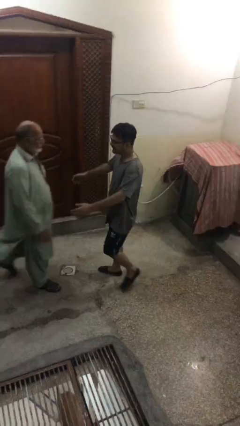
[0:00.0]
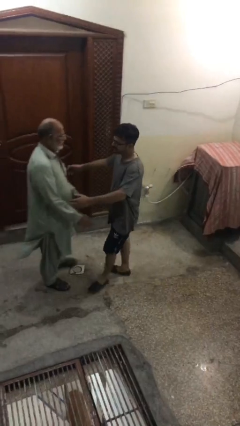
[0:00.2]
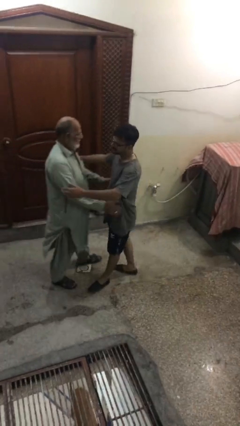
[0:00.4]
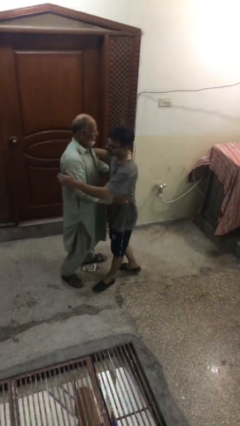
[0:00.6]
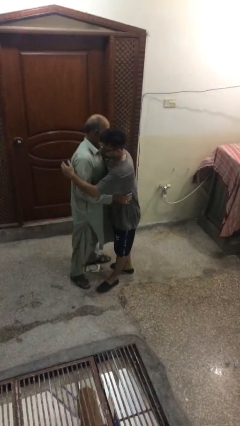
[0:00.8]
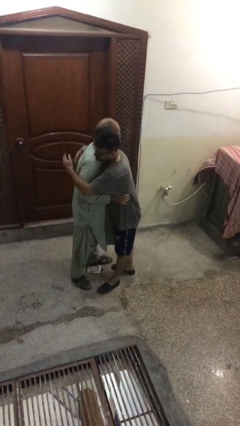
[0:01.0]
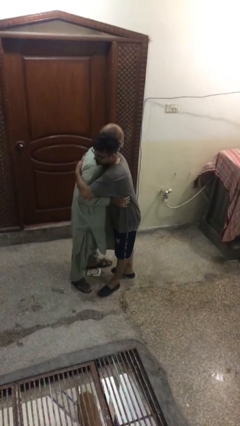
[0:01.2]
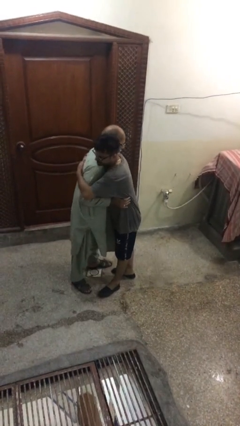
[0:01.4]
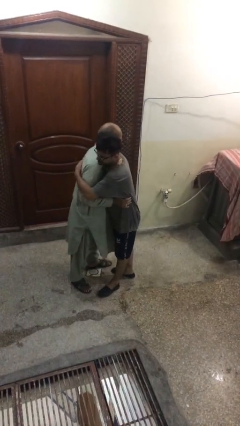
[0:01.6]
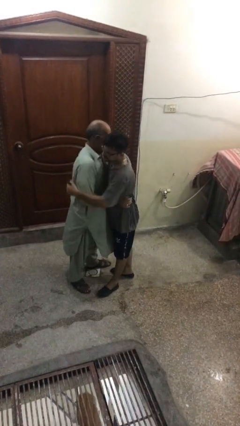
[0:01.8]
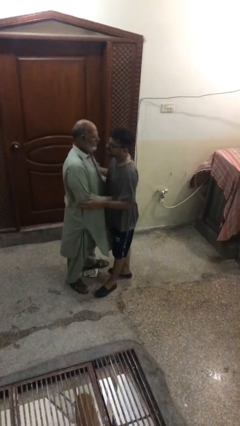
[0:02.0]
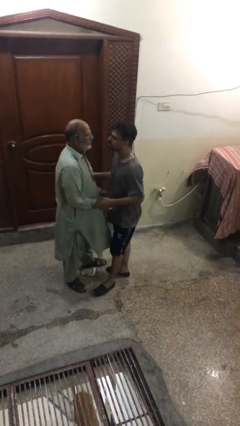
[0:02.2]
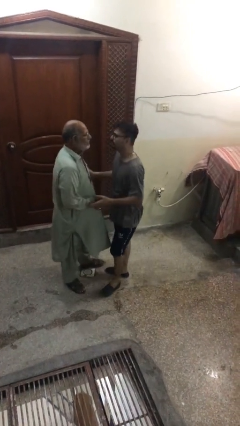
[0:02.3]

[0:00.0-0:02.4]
person embraces person

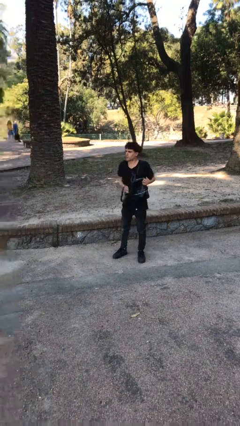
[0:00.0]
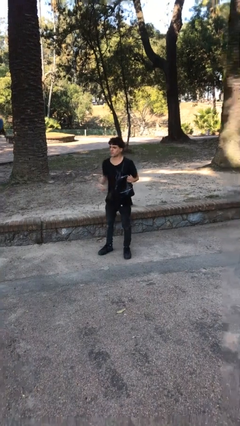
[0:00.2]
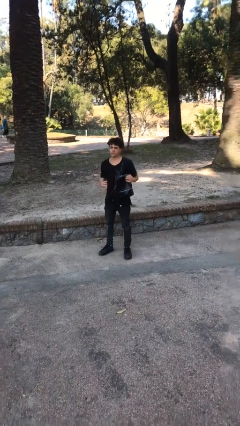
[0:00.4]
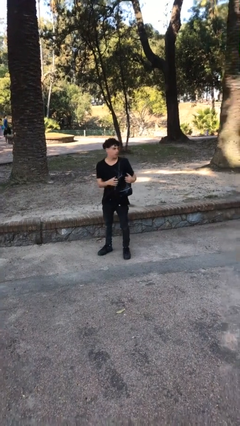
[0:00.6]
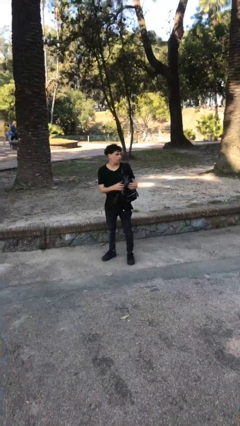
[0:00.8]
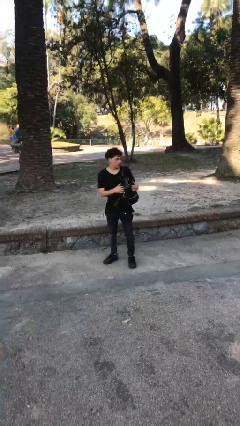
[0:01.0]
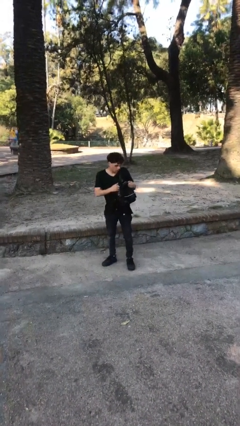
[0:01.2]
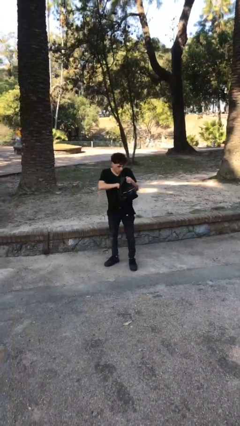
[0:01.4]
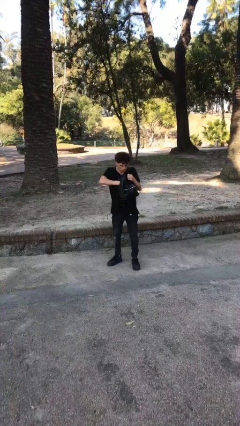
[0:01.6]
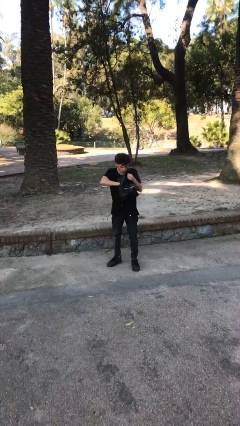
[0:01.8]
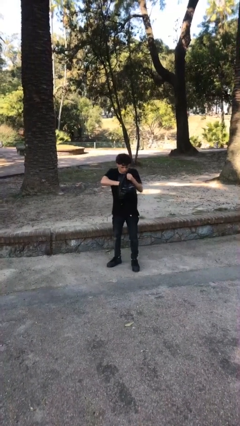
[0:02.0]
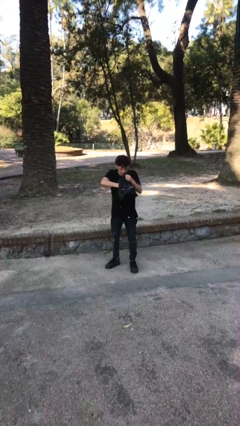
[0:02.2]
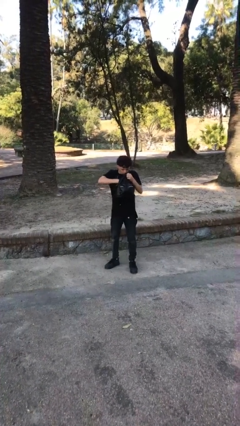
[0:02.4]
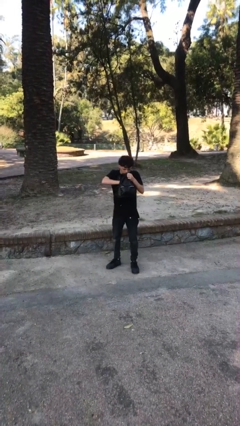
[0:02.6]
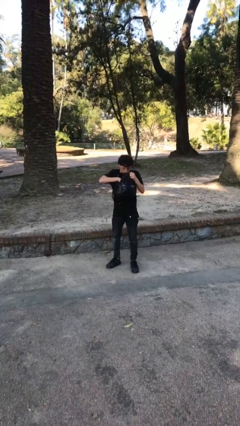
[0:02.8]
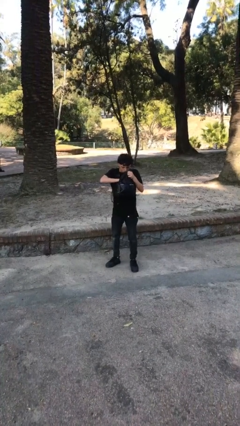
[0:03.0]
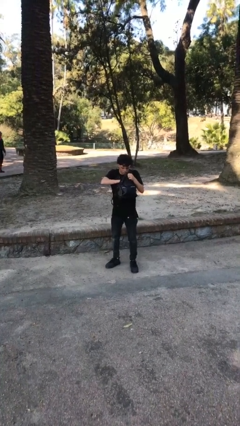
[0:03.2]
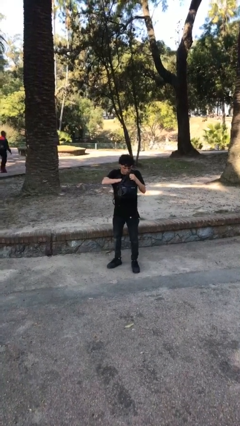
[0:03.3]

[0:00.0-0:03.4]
person searches in purse

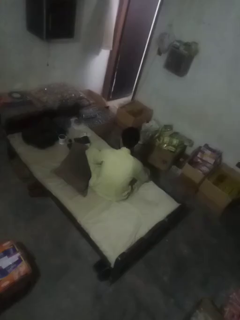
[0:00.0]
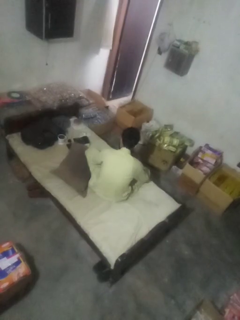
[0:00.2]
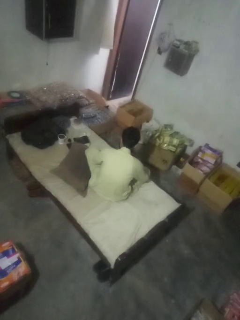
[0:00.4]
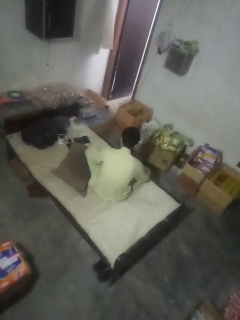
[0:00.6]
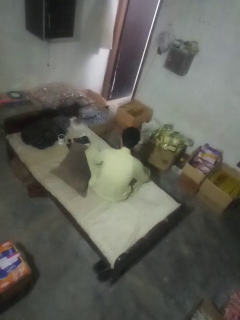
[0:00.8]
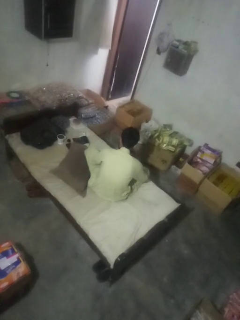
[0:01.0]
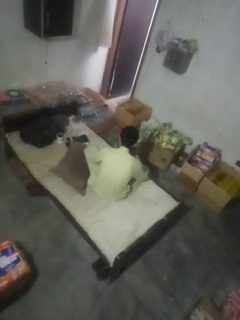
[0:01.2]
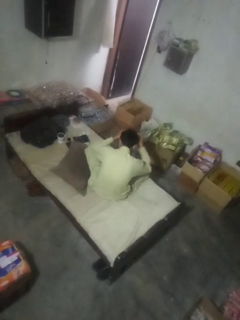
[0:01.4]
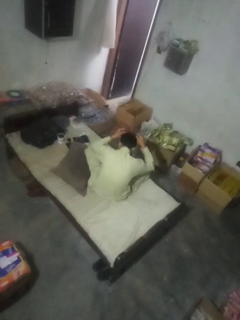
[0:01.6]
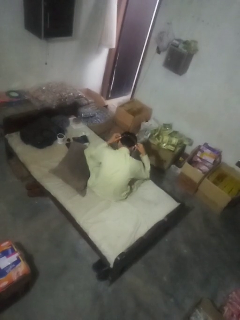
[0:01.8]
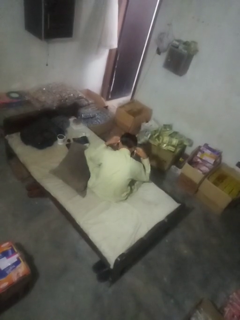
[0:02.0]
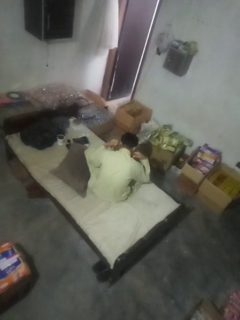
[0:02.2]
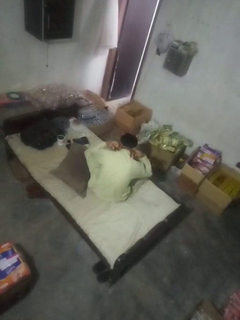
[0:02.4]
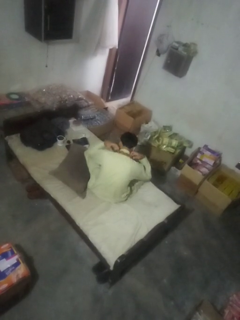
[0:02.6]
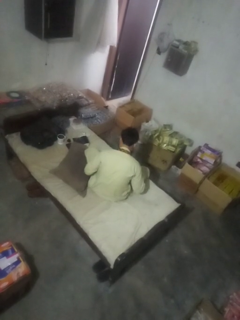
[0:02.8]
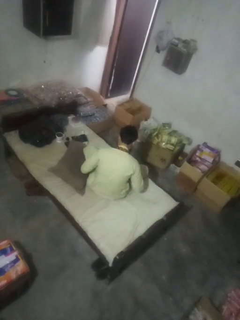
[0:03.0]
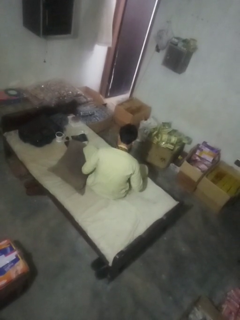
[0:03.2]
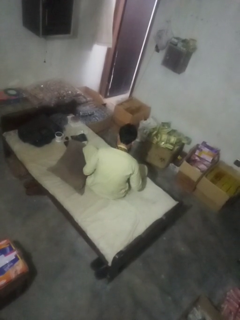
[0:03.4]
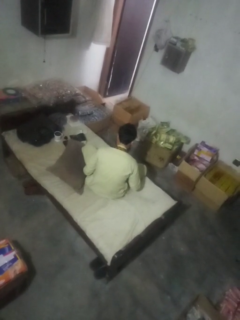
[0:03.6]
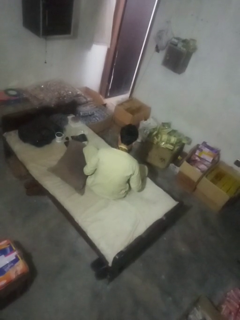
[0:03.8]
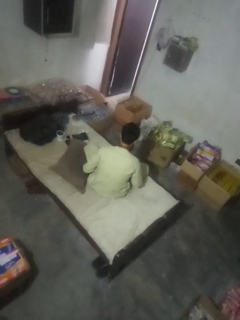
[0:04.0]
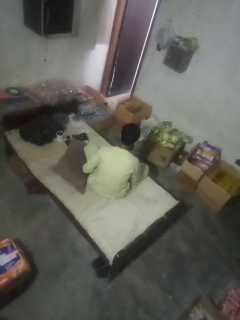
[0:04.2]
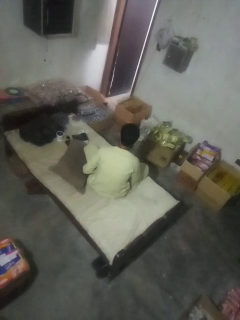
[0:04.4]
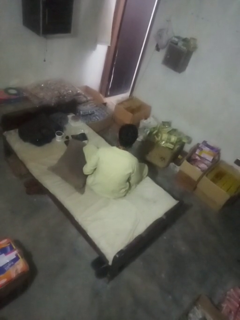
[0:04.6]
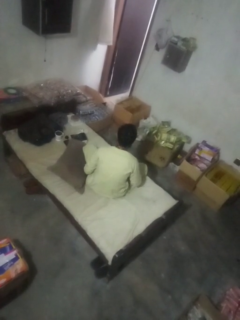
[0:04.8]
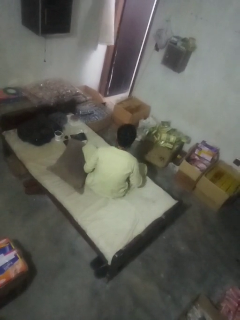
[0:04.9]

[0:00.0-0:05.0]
person puts on necktie

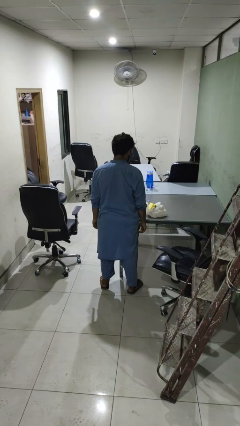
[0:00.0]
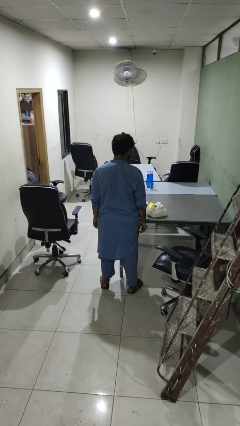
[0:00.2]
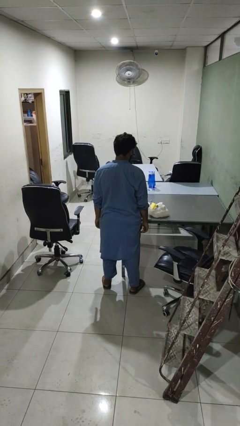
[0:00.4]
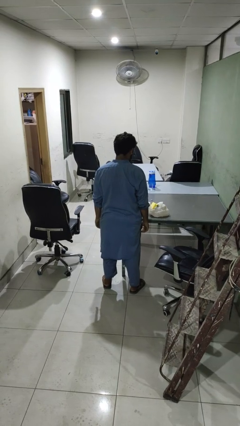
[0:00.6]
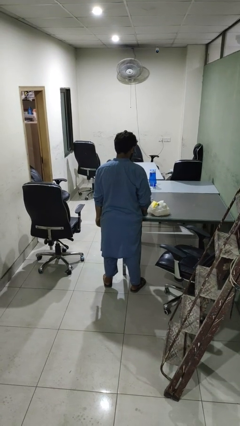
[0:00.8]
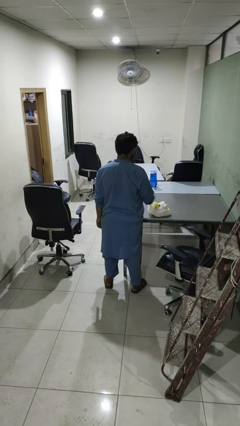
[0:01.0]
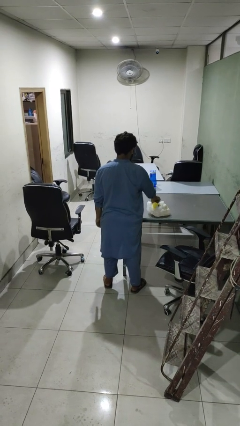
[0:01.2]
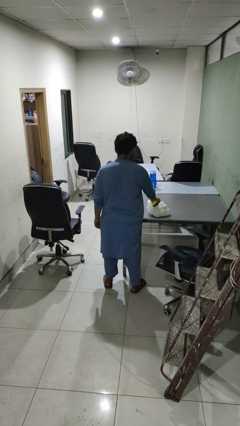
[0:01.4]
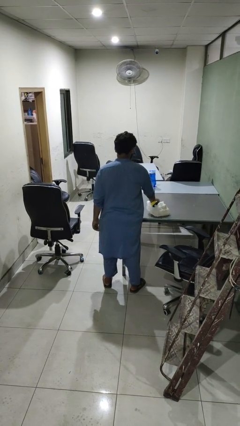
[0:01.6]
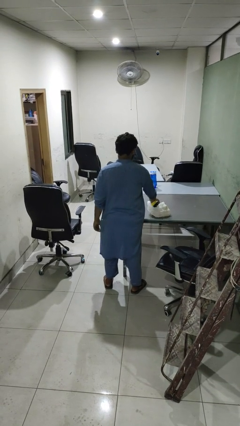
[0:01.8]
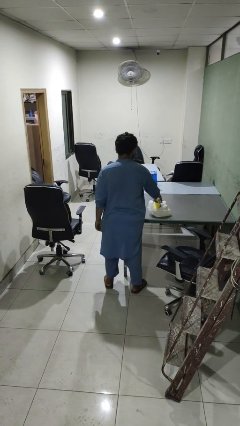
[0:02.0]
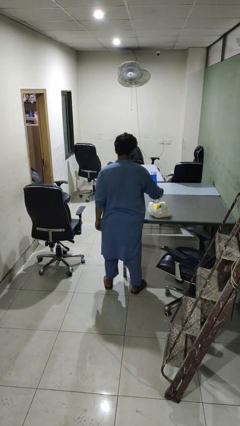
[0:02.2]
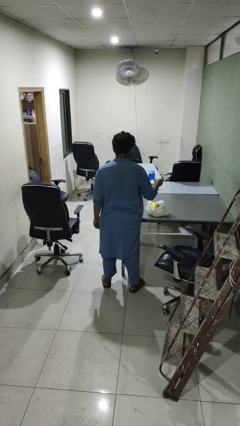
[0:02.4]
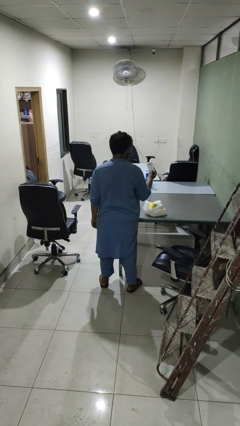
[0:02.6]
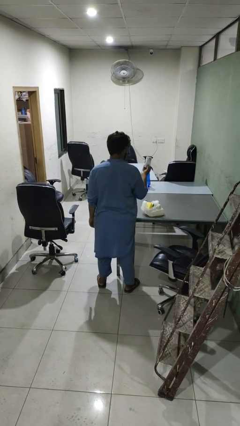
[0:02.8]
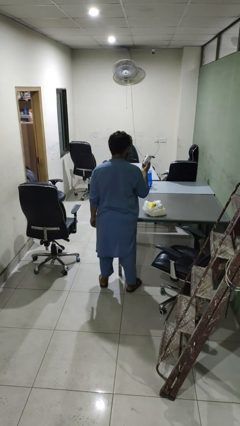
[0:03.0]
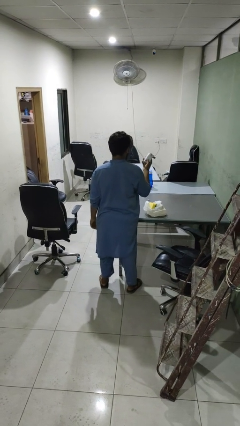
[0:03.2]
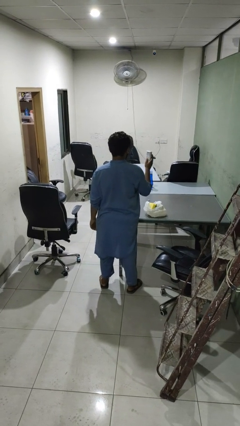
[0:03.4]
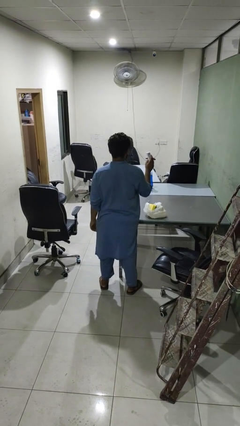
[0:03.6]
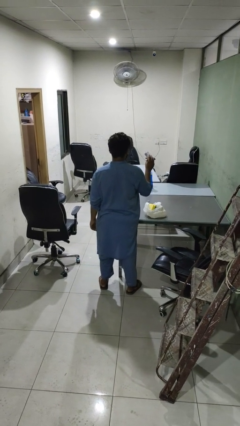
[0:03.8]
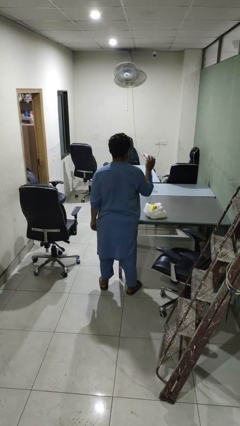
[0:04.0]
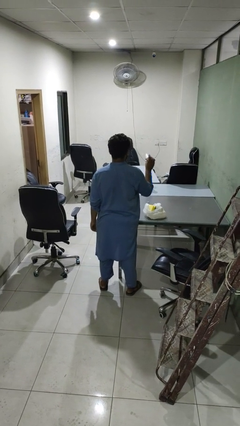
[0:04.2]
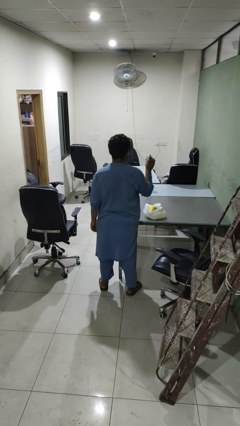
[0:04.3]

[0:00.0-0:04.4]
person takes object from bag

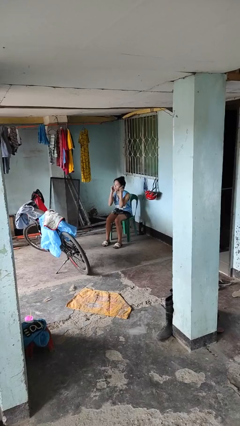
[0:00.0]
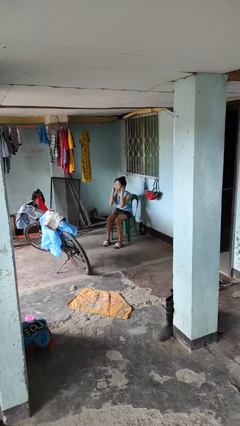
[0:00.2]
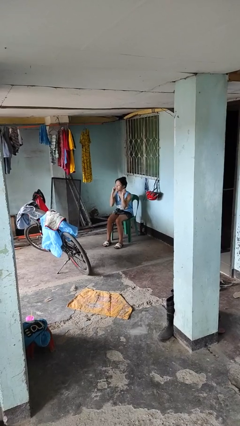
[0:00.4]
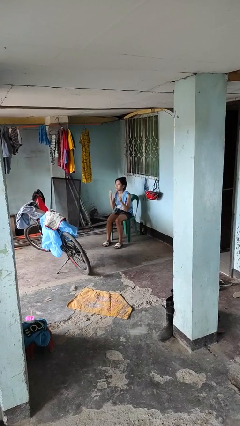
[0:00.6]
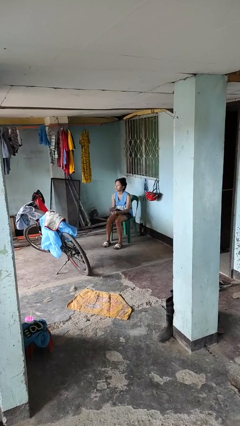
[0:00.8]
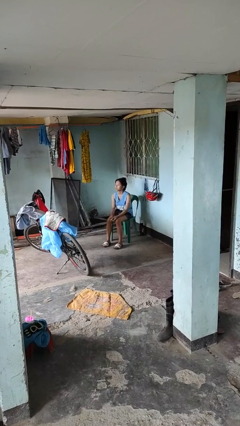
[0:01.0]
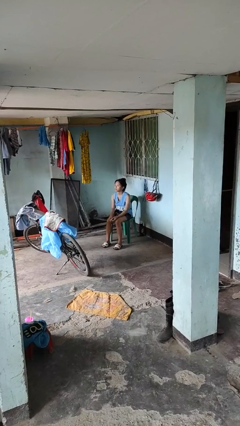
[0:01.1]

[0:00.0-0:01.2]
person takes off headphones

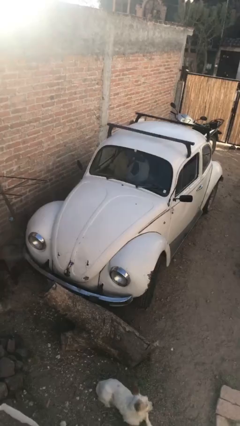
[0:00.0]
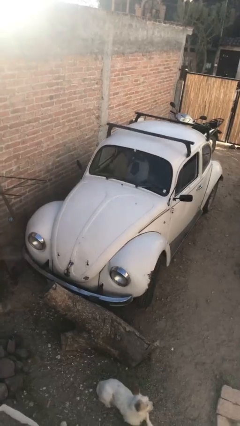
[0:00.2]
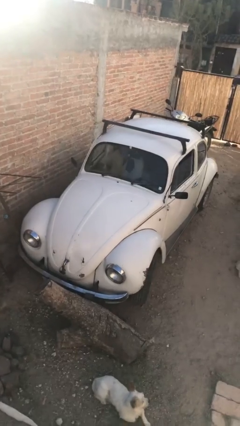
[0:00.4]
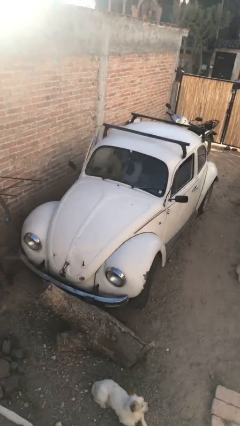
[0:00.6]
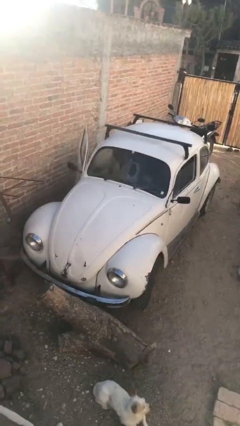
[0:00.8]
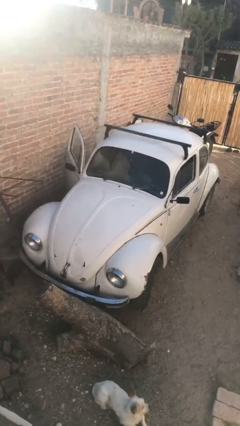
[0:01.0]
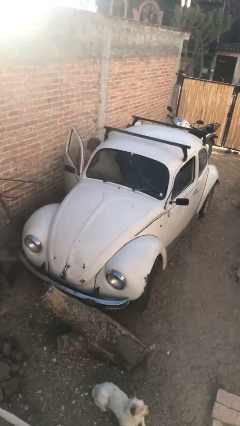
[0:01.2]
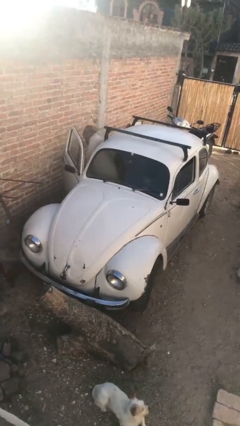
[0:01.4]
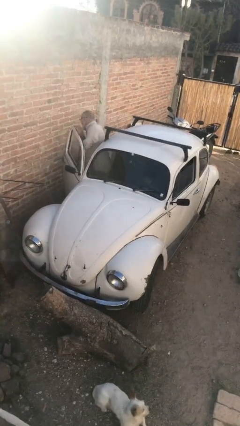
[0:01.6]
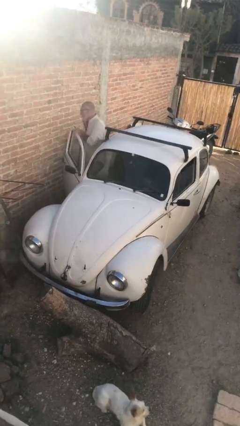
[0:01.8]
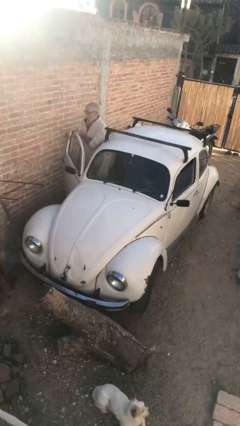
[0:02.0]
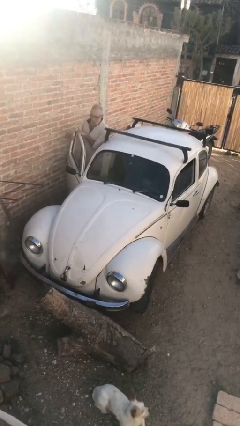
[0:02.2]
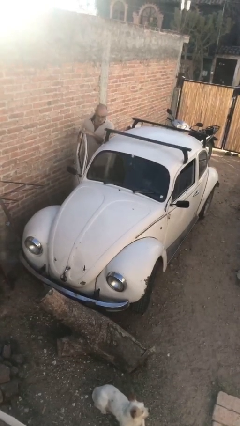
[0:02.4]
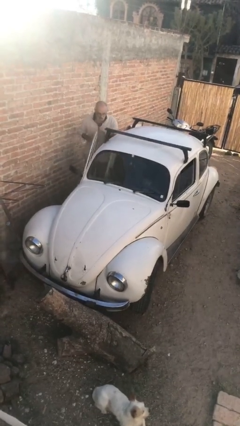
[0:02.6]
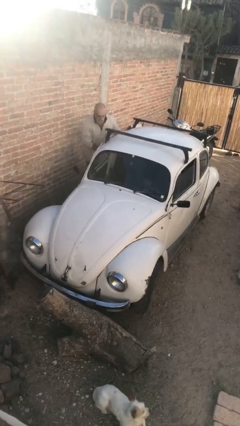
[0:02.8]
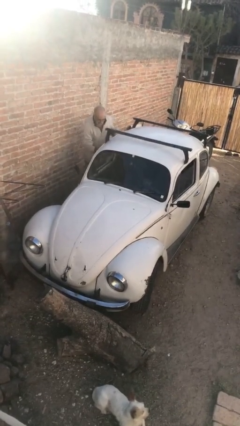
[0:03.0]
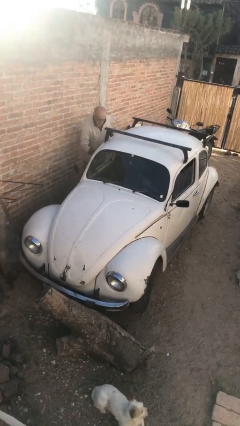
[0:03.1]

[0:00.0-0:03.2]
car drops off person
